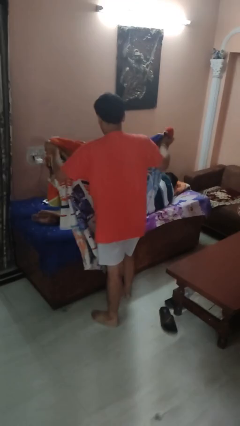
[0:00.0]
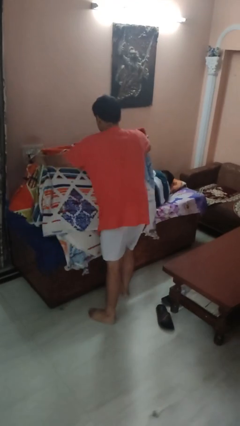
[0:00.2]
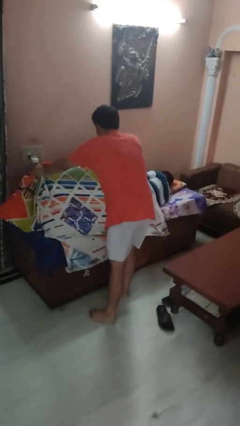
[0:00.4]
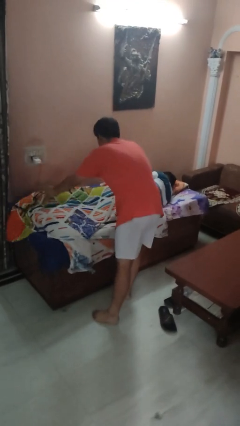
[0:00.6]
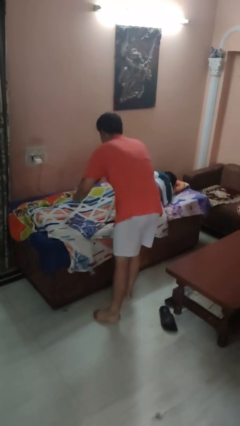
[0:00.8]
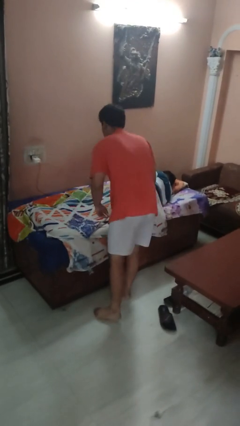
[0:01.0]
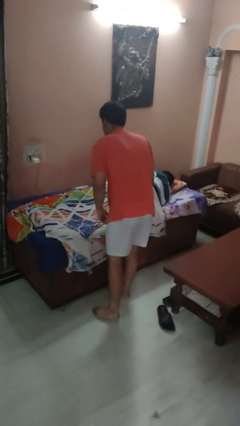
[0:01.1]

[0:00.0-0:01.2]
person covers friend with blanket

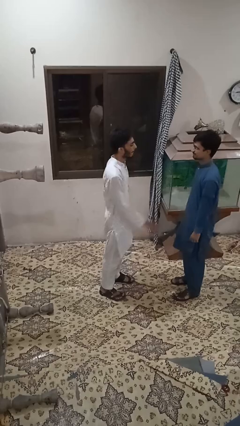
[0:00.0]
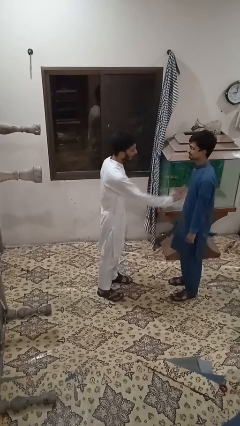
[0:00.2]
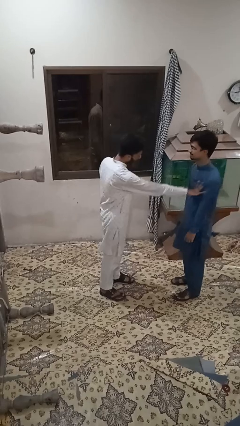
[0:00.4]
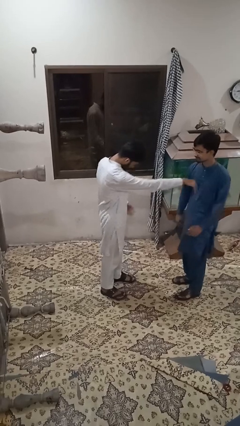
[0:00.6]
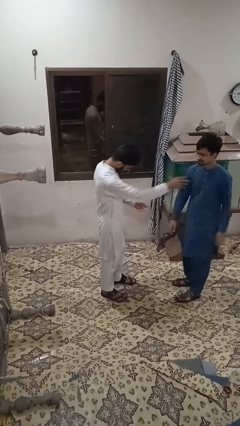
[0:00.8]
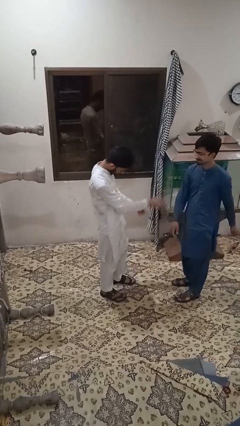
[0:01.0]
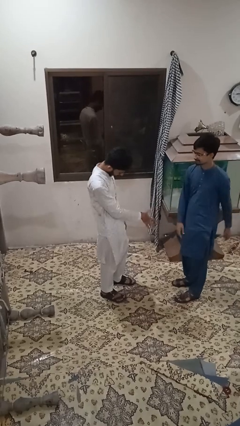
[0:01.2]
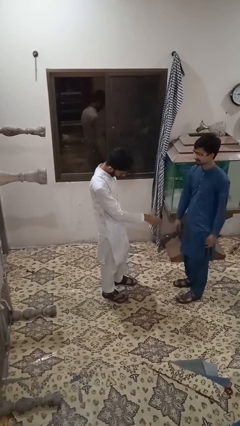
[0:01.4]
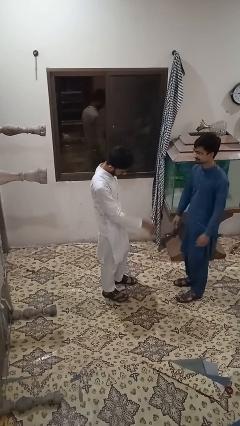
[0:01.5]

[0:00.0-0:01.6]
person shoves person

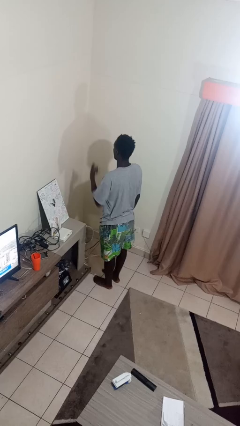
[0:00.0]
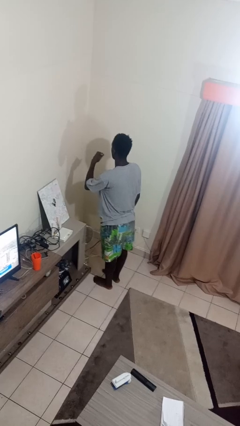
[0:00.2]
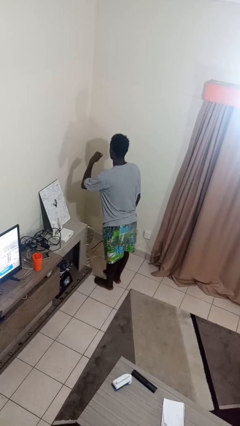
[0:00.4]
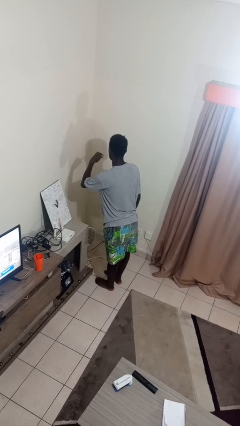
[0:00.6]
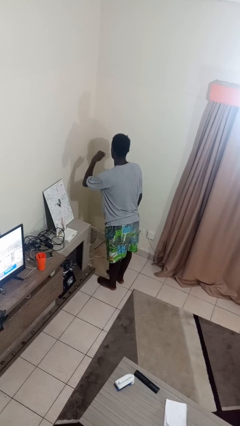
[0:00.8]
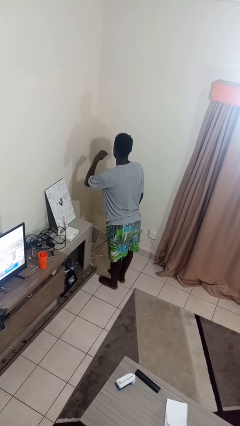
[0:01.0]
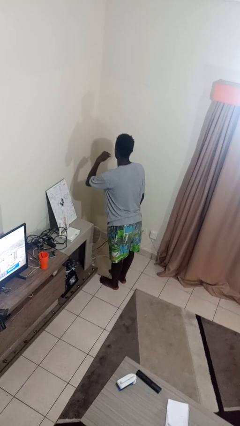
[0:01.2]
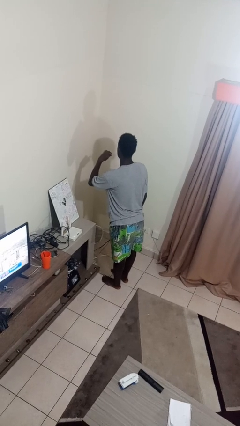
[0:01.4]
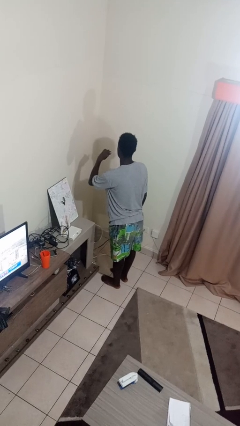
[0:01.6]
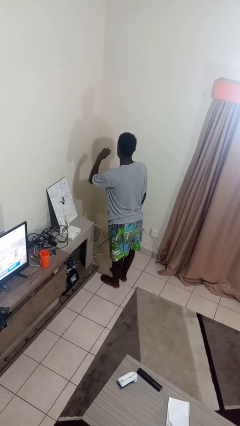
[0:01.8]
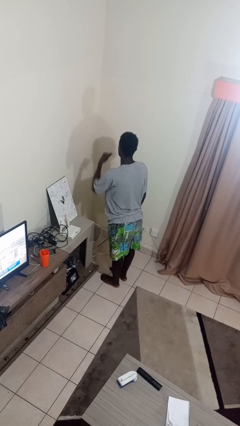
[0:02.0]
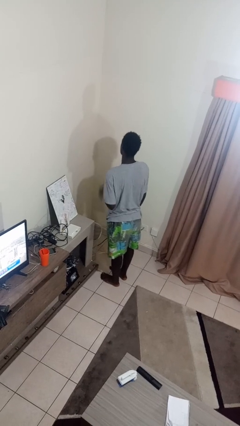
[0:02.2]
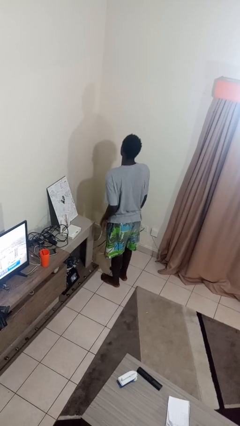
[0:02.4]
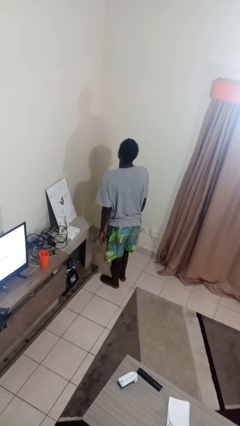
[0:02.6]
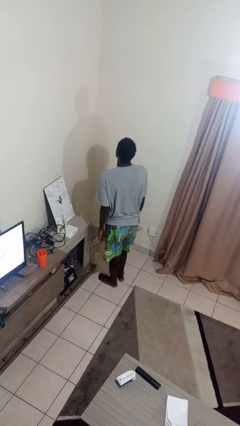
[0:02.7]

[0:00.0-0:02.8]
person gestures call me

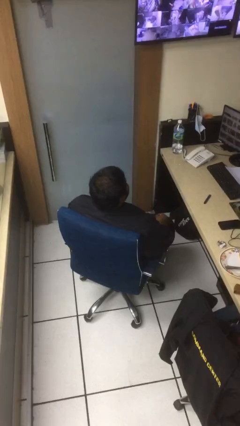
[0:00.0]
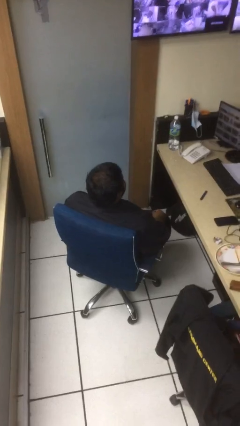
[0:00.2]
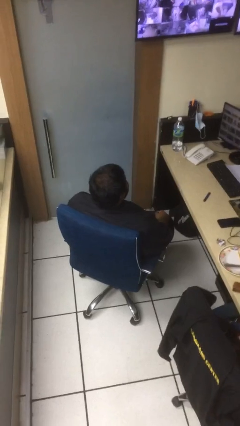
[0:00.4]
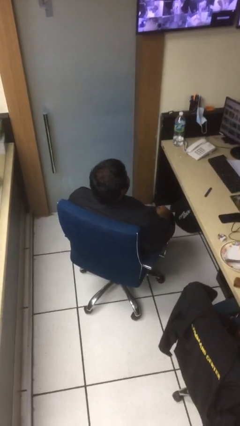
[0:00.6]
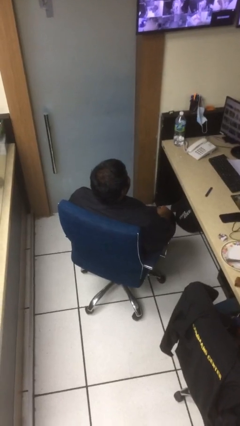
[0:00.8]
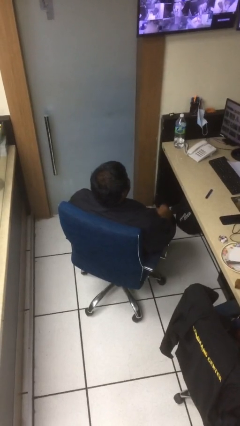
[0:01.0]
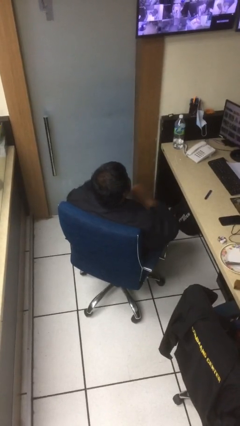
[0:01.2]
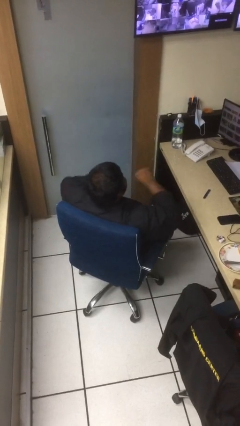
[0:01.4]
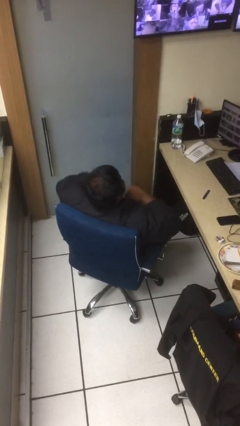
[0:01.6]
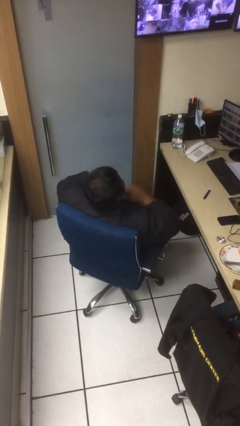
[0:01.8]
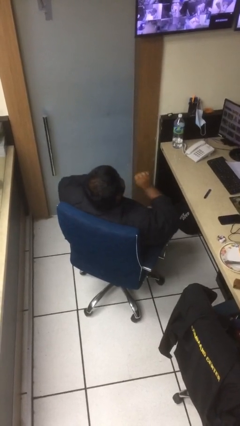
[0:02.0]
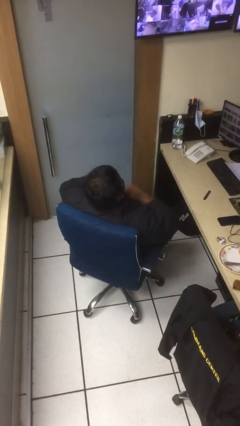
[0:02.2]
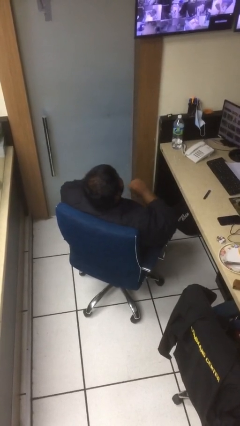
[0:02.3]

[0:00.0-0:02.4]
person drums on chest

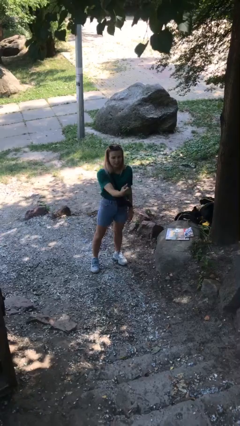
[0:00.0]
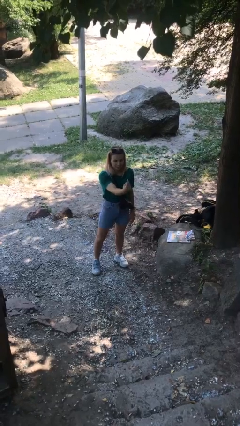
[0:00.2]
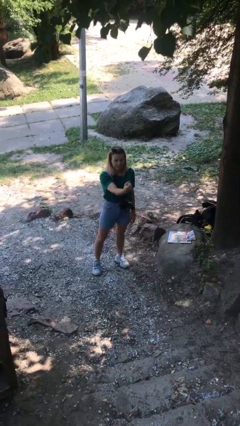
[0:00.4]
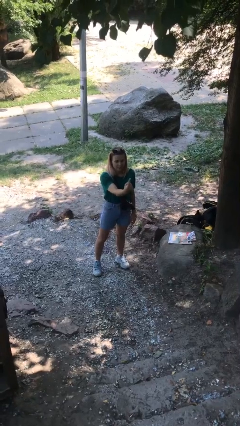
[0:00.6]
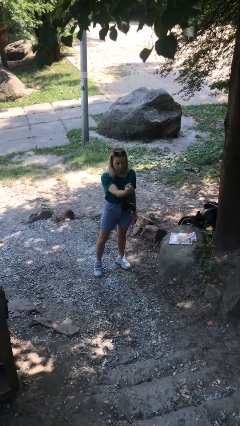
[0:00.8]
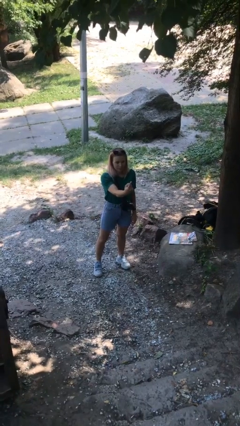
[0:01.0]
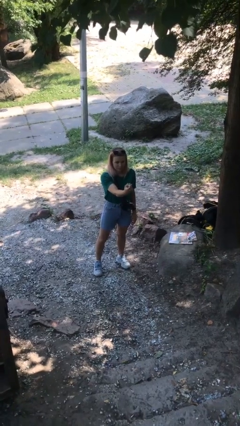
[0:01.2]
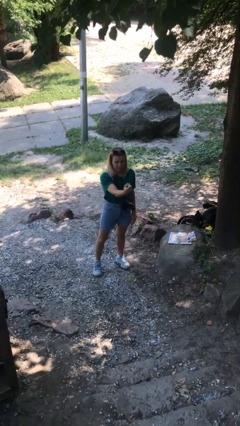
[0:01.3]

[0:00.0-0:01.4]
person gestures come here

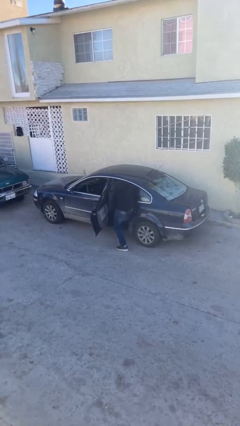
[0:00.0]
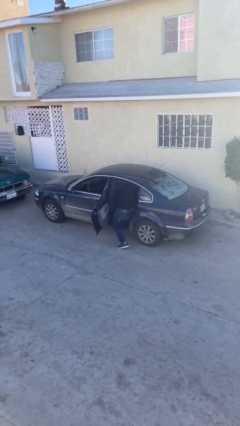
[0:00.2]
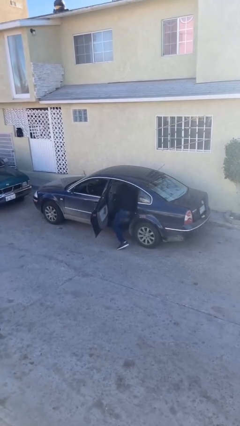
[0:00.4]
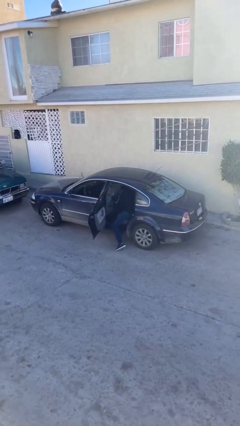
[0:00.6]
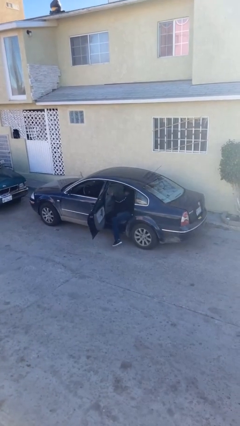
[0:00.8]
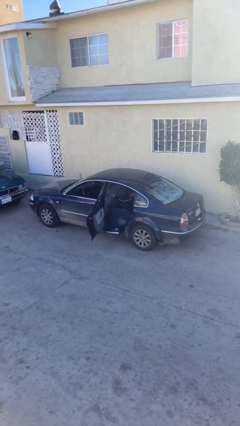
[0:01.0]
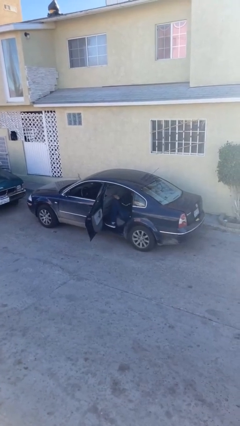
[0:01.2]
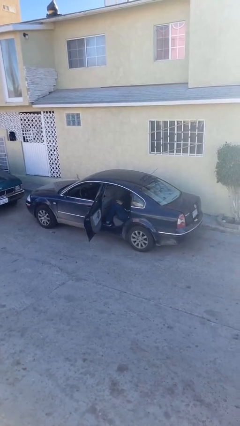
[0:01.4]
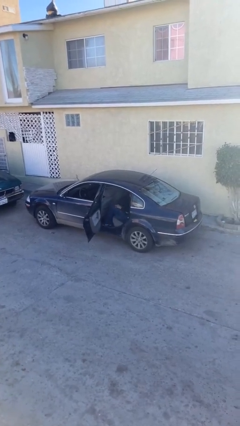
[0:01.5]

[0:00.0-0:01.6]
person enters car

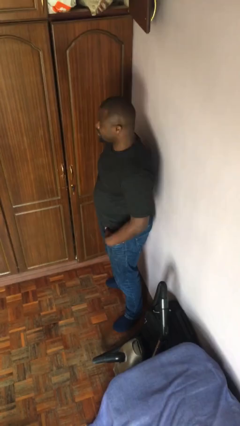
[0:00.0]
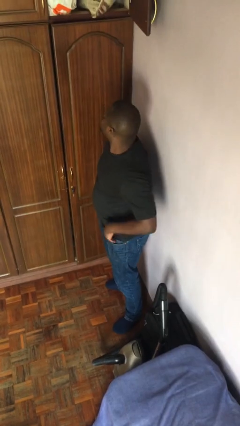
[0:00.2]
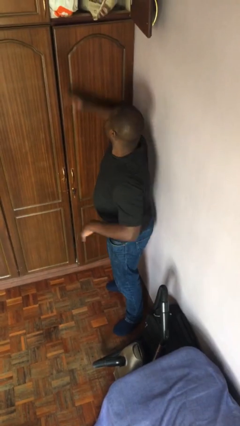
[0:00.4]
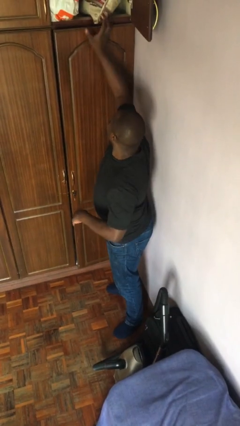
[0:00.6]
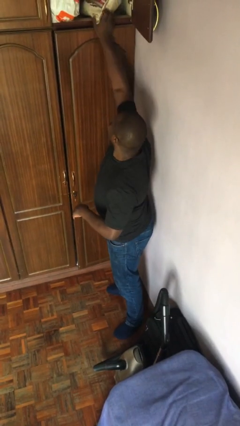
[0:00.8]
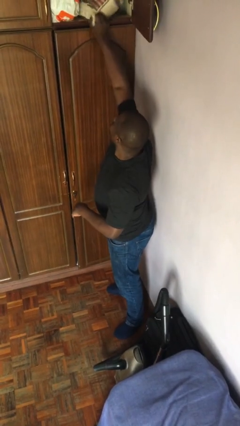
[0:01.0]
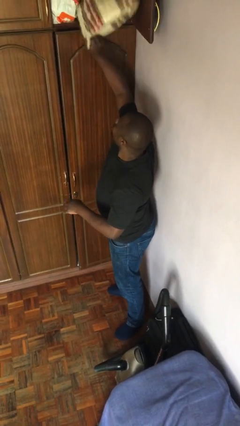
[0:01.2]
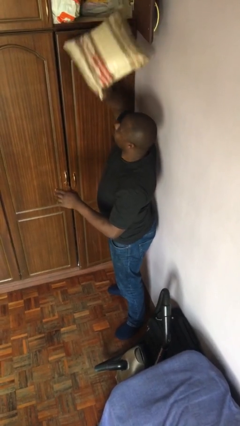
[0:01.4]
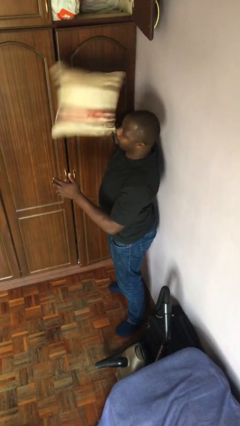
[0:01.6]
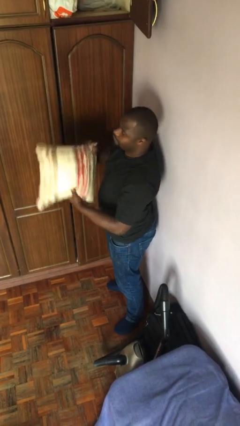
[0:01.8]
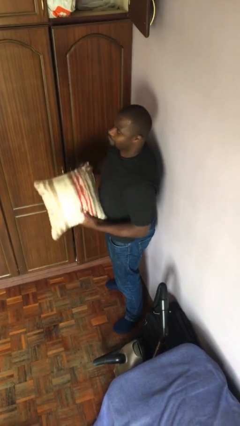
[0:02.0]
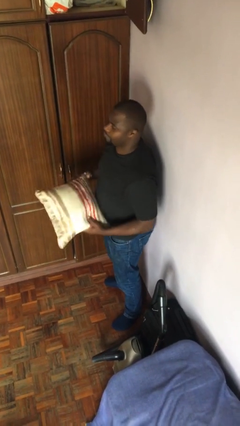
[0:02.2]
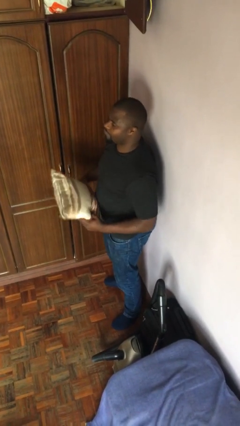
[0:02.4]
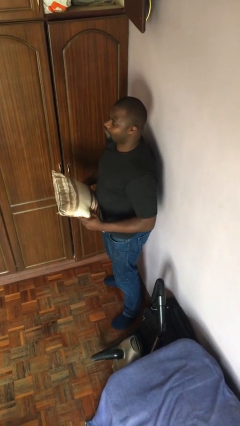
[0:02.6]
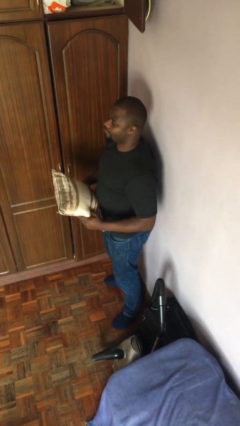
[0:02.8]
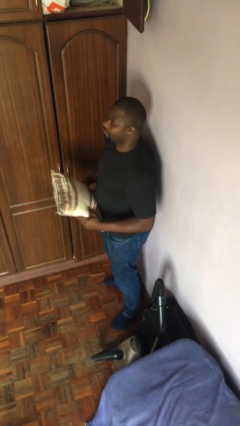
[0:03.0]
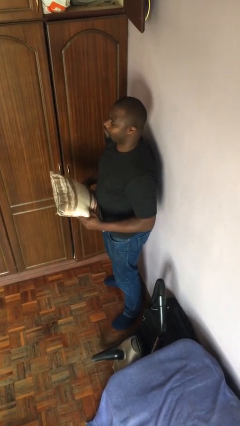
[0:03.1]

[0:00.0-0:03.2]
person picks up object from shelf

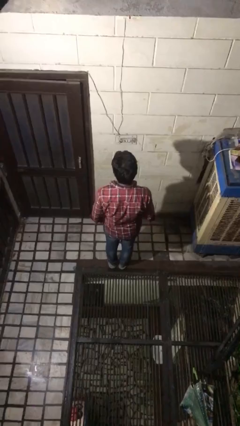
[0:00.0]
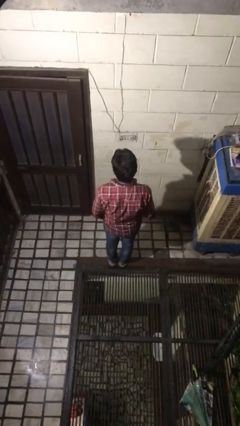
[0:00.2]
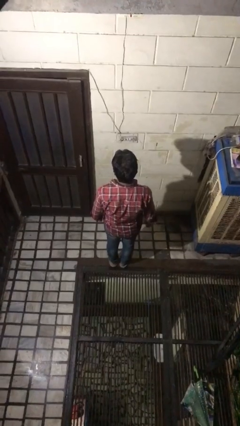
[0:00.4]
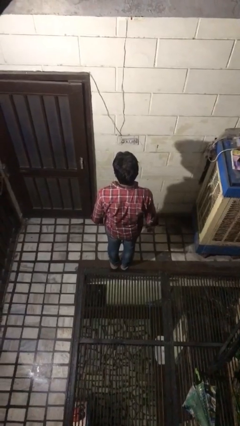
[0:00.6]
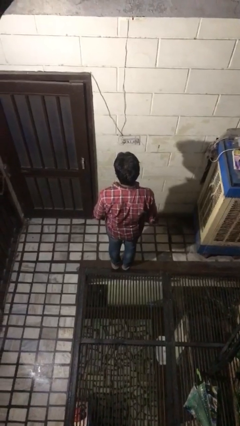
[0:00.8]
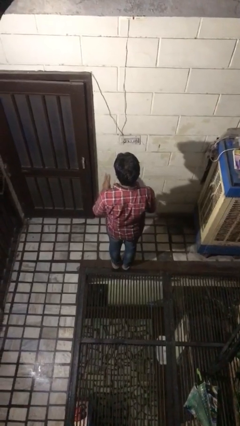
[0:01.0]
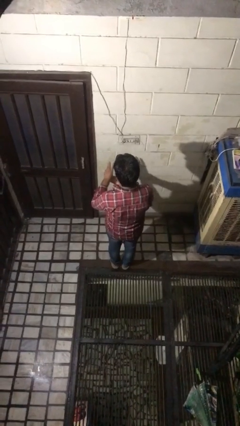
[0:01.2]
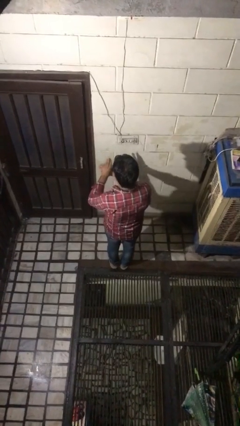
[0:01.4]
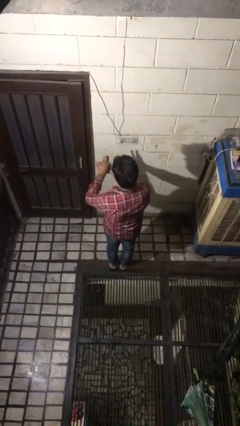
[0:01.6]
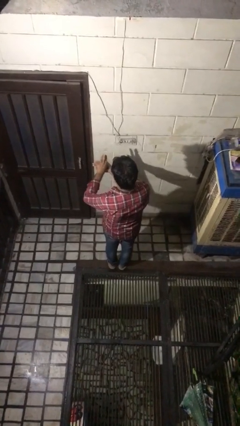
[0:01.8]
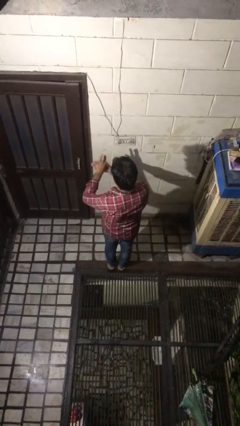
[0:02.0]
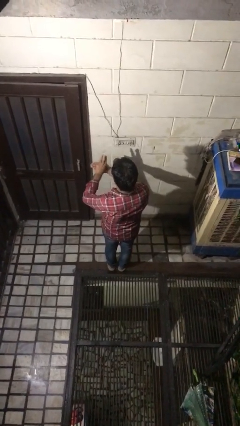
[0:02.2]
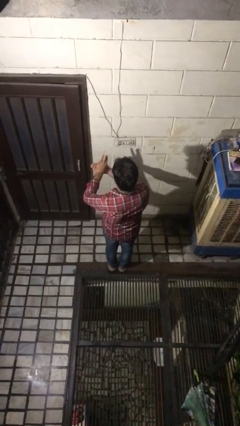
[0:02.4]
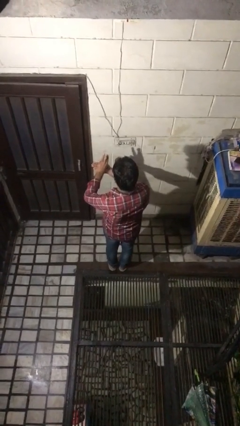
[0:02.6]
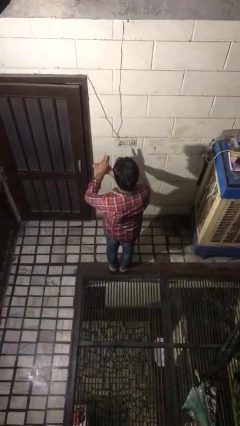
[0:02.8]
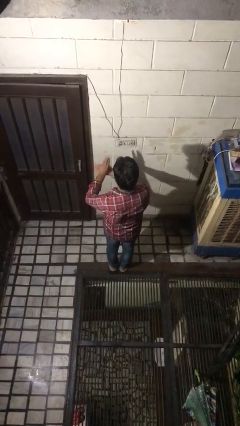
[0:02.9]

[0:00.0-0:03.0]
person gestures number three
